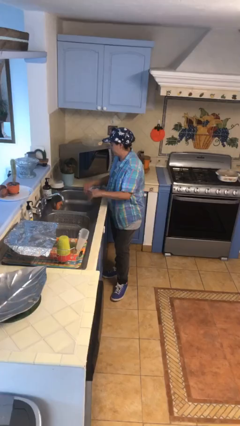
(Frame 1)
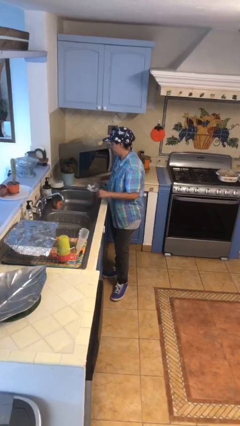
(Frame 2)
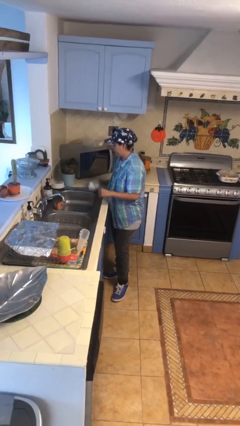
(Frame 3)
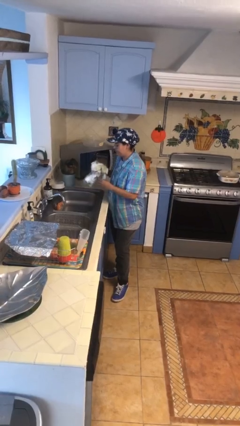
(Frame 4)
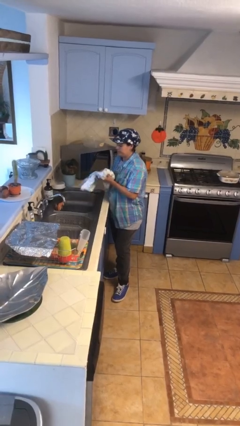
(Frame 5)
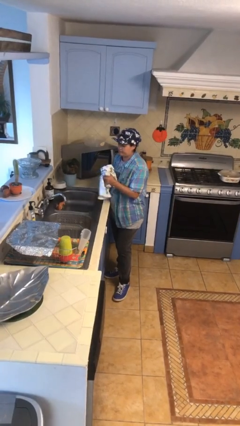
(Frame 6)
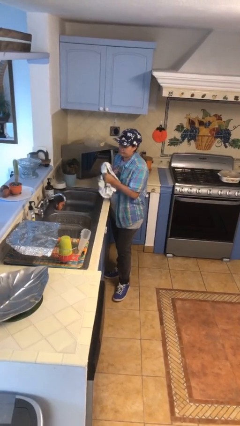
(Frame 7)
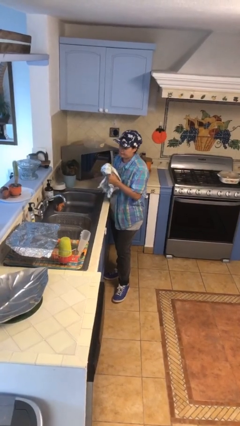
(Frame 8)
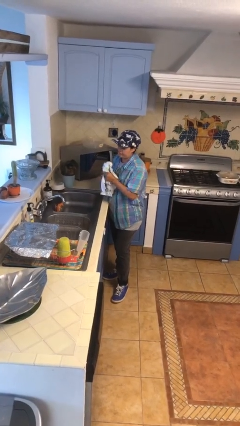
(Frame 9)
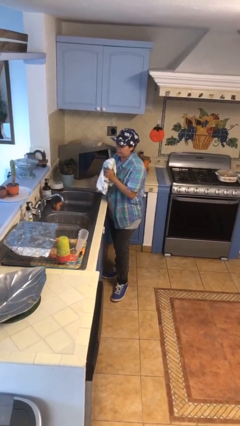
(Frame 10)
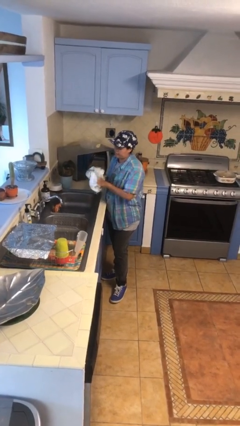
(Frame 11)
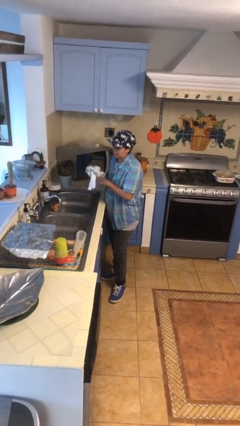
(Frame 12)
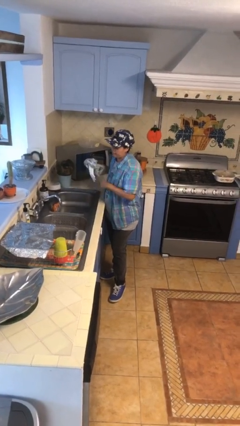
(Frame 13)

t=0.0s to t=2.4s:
person dries hands with towel

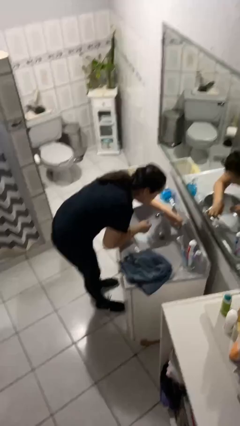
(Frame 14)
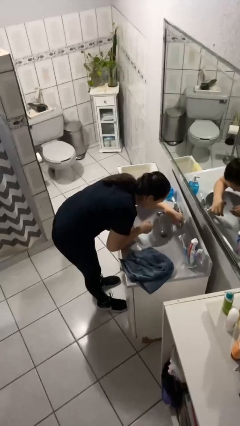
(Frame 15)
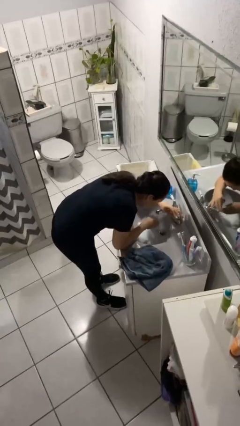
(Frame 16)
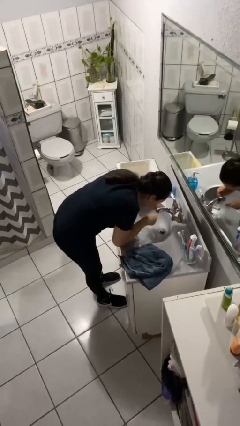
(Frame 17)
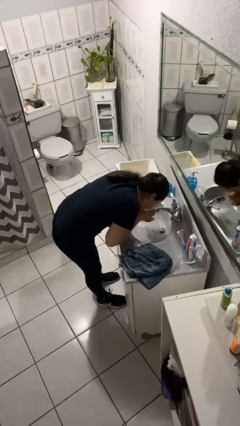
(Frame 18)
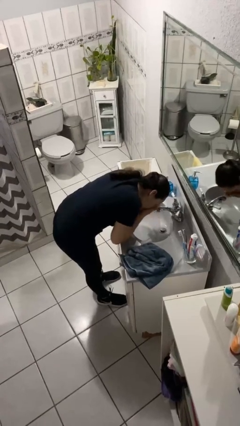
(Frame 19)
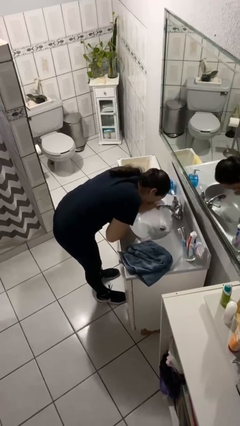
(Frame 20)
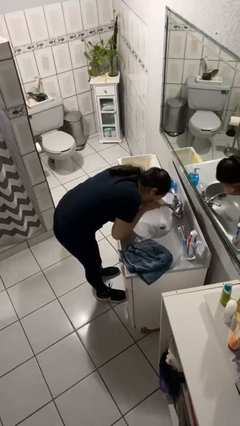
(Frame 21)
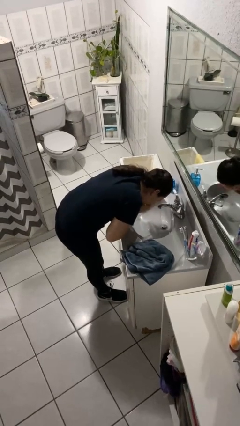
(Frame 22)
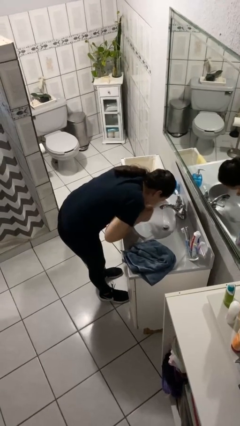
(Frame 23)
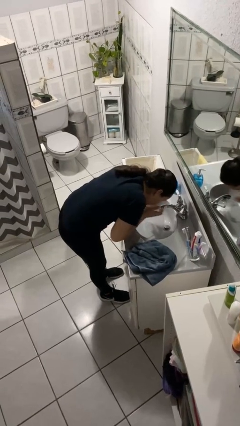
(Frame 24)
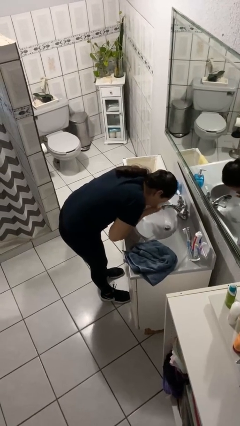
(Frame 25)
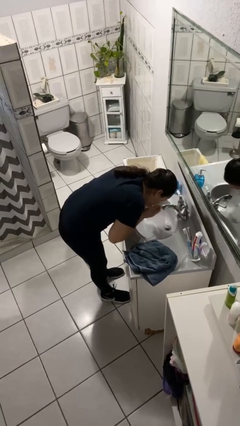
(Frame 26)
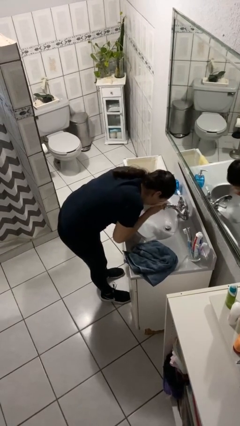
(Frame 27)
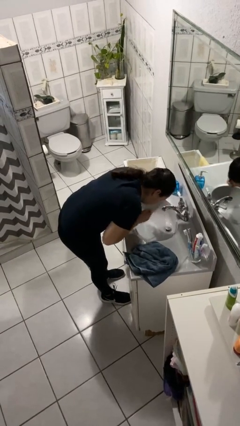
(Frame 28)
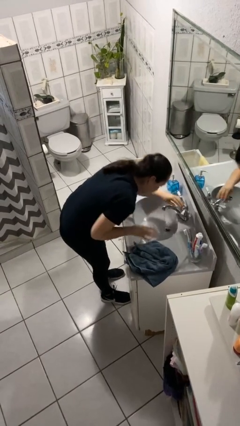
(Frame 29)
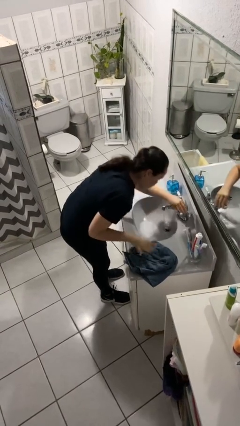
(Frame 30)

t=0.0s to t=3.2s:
person washes face

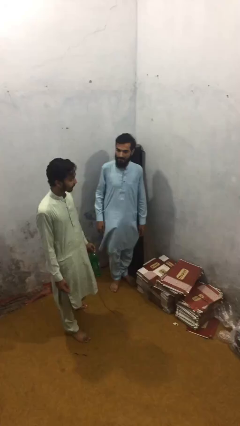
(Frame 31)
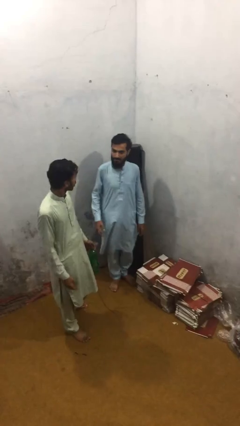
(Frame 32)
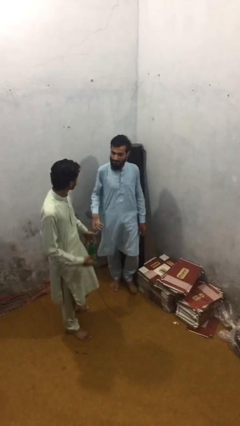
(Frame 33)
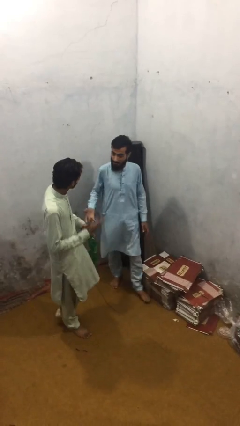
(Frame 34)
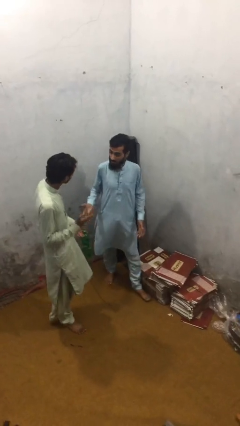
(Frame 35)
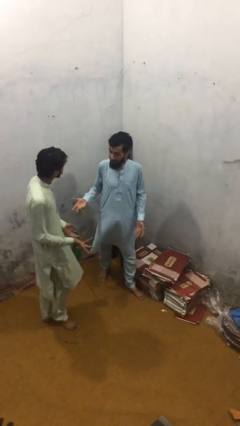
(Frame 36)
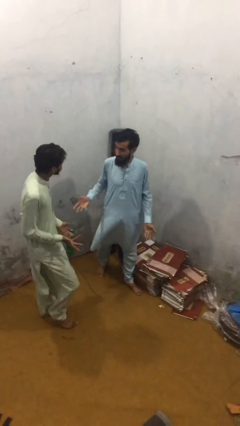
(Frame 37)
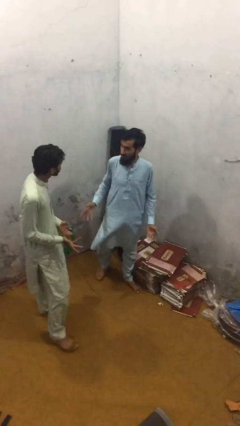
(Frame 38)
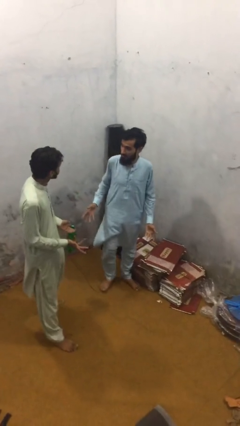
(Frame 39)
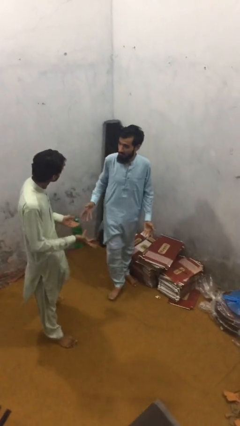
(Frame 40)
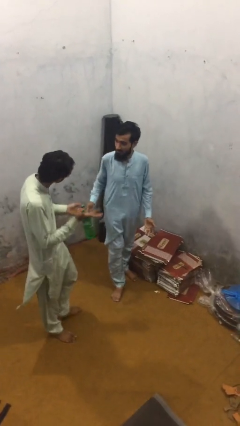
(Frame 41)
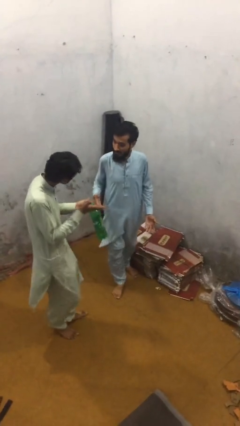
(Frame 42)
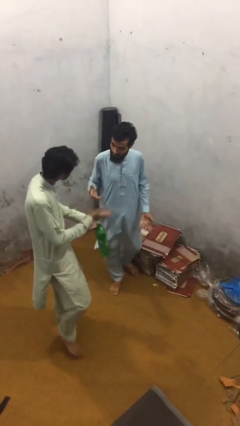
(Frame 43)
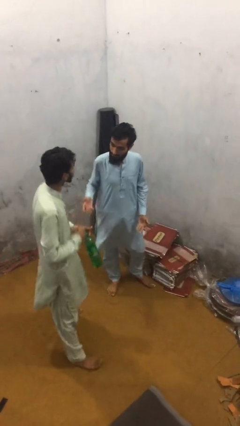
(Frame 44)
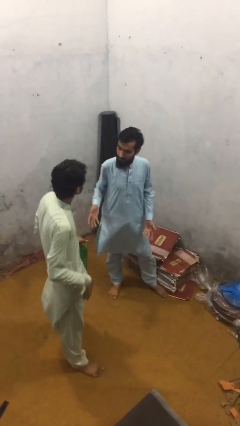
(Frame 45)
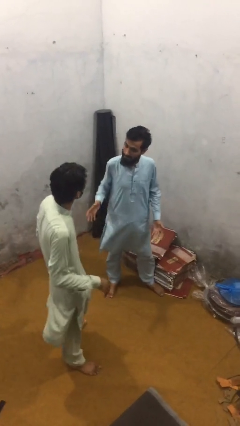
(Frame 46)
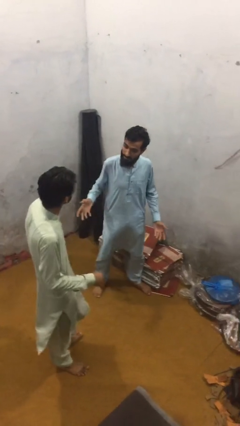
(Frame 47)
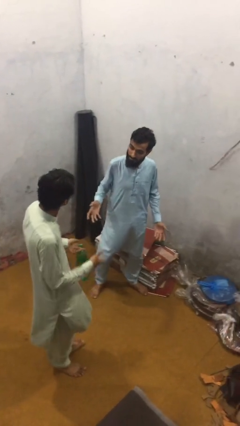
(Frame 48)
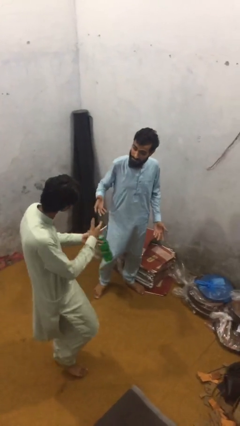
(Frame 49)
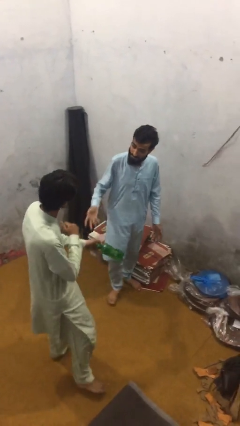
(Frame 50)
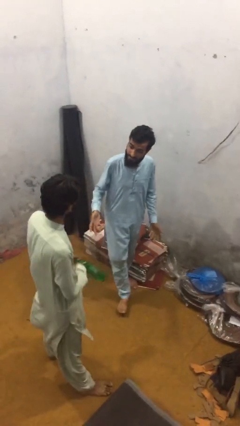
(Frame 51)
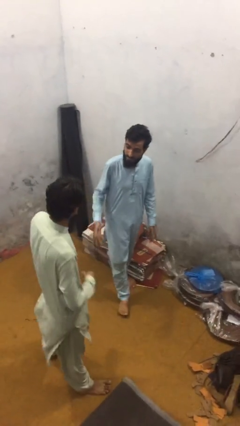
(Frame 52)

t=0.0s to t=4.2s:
person talks to person

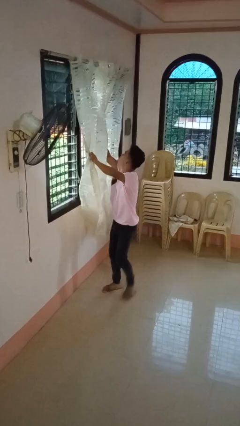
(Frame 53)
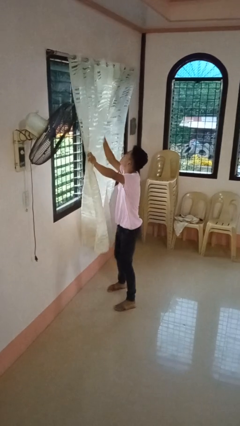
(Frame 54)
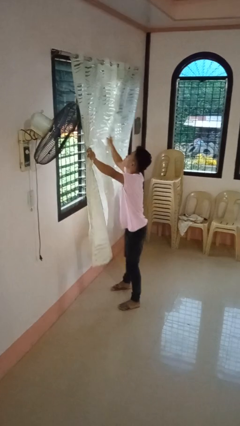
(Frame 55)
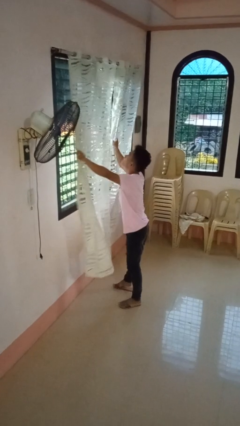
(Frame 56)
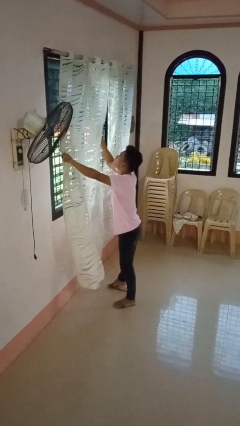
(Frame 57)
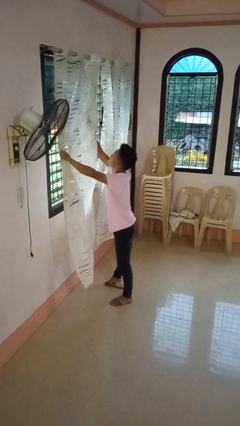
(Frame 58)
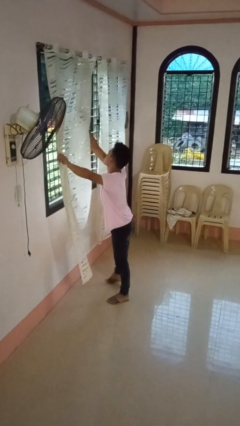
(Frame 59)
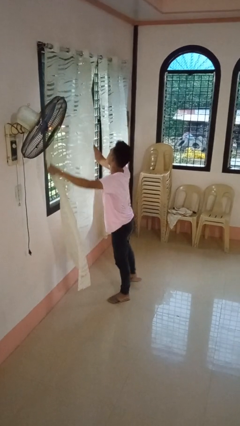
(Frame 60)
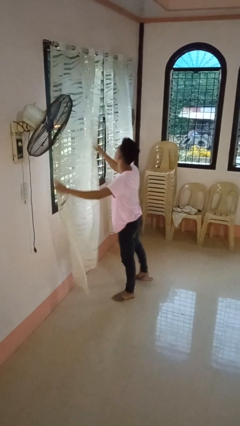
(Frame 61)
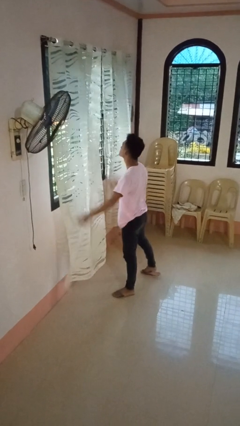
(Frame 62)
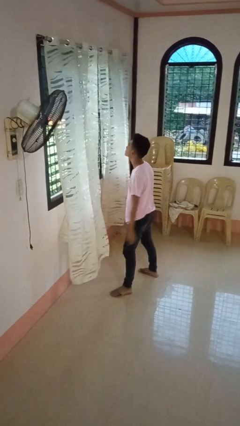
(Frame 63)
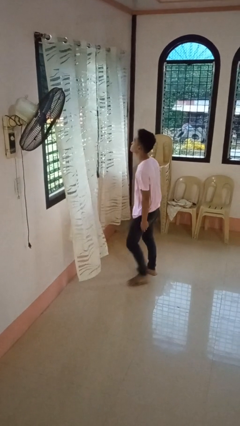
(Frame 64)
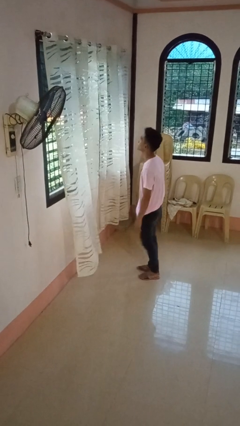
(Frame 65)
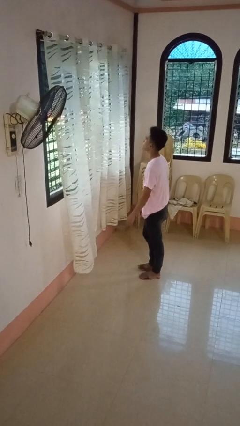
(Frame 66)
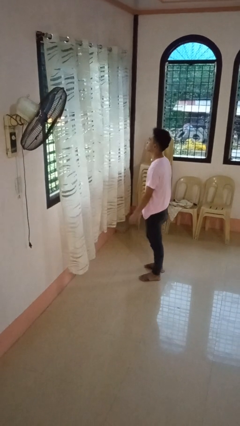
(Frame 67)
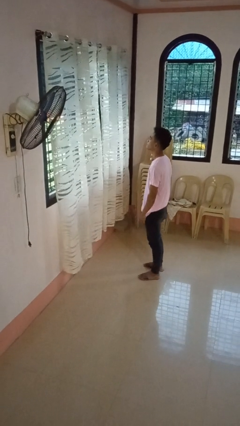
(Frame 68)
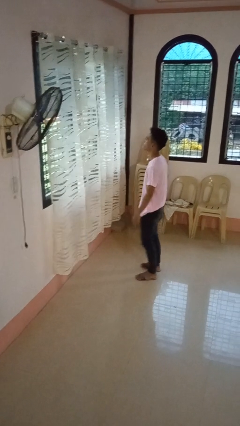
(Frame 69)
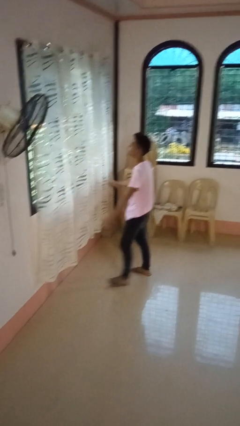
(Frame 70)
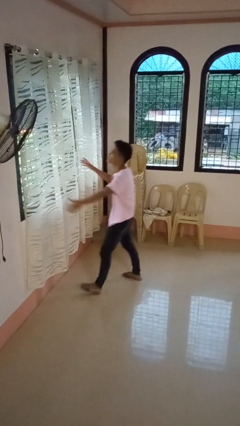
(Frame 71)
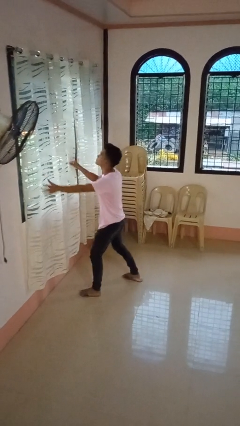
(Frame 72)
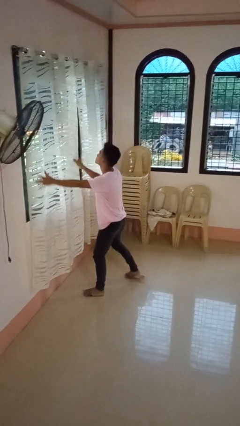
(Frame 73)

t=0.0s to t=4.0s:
person closes curtains

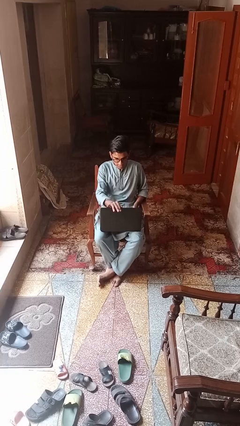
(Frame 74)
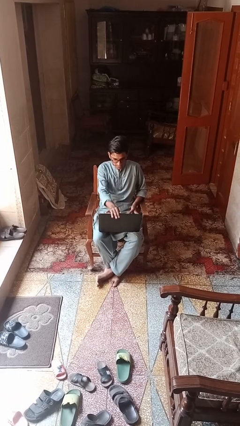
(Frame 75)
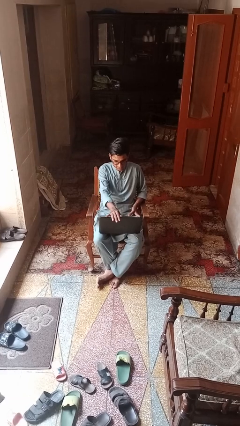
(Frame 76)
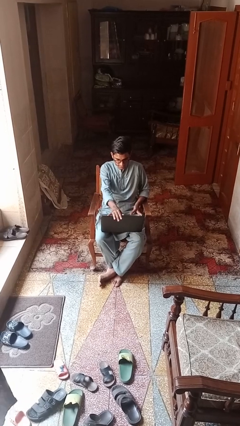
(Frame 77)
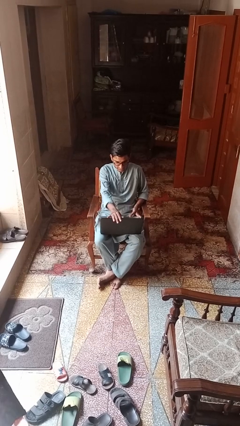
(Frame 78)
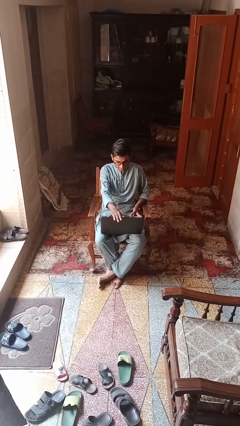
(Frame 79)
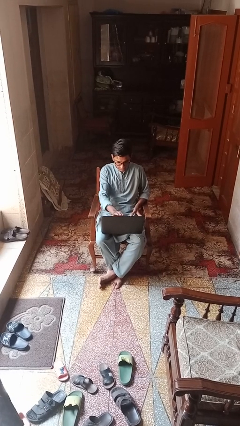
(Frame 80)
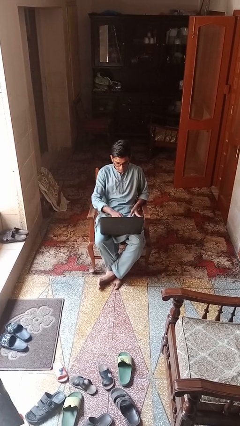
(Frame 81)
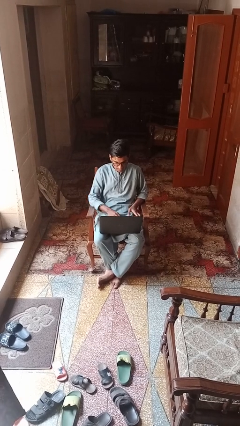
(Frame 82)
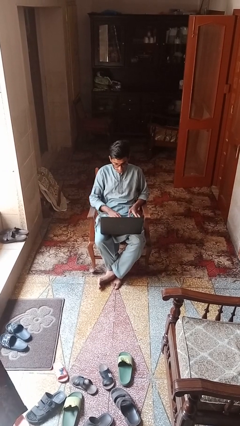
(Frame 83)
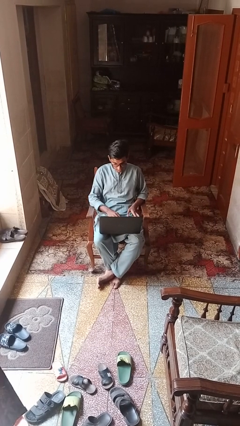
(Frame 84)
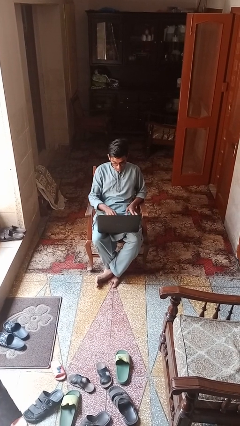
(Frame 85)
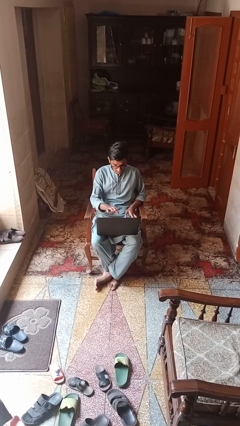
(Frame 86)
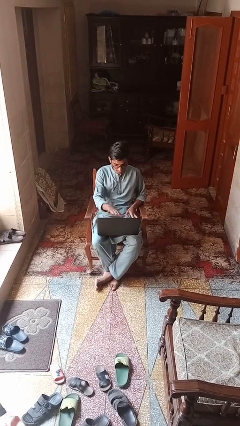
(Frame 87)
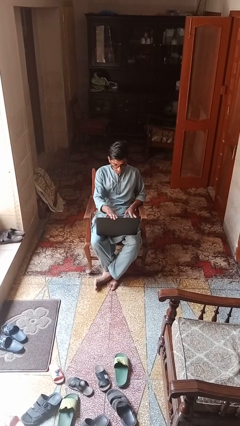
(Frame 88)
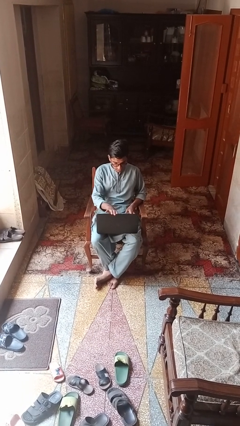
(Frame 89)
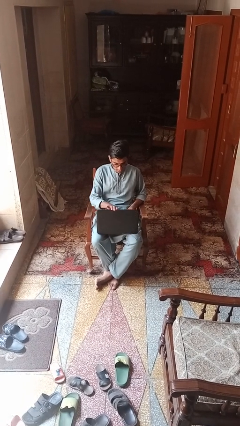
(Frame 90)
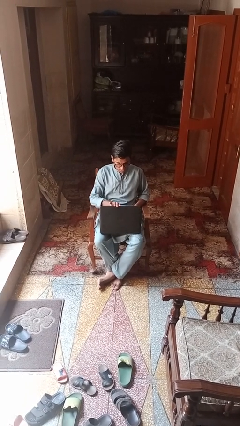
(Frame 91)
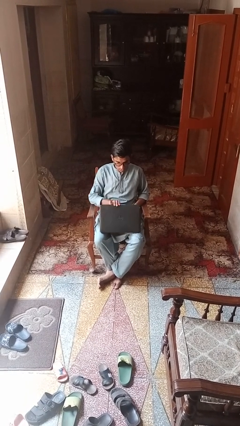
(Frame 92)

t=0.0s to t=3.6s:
person opens laptop
